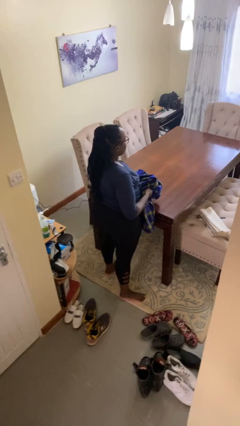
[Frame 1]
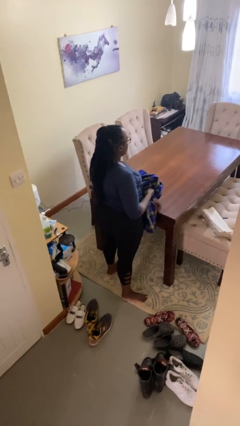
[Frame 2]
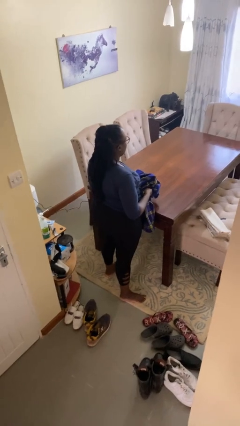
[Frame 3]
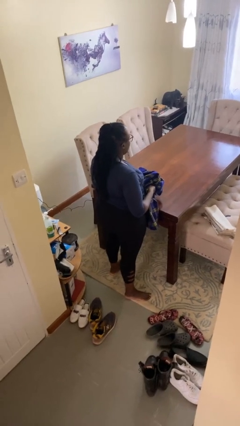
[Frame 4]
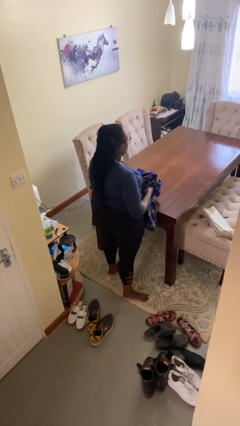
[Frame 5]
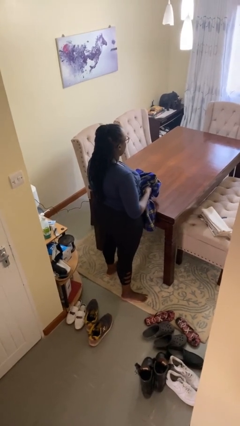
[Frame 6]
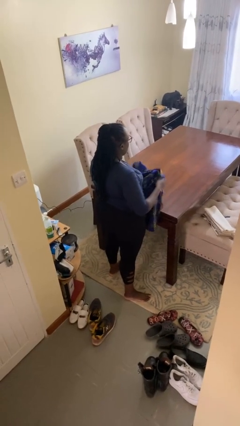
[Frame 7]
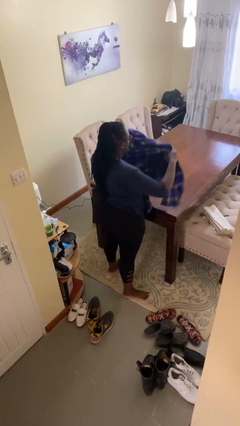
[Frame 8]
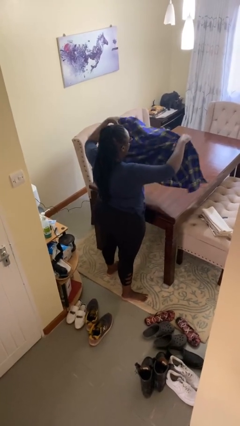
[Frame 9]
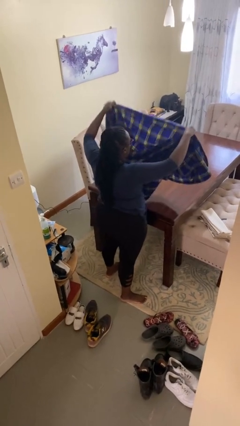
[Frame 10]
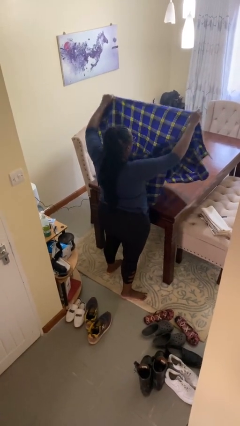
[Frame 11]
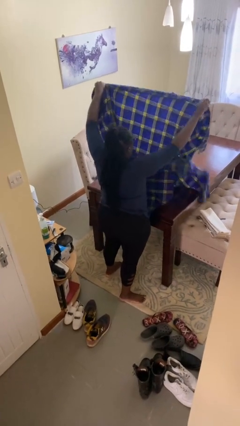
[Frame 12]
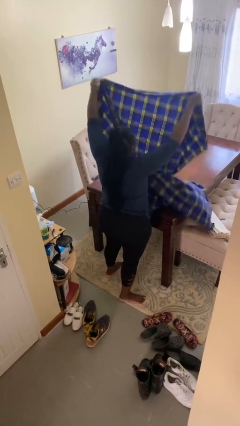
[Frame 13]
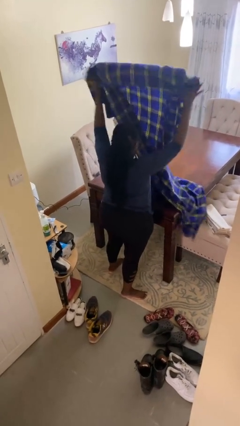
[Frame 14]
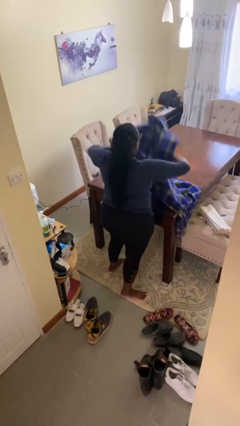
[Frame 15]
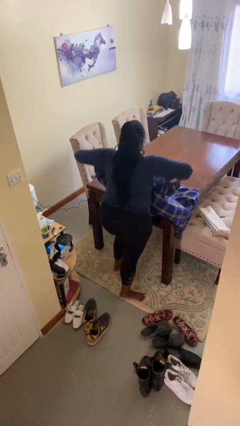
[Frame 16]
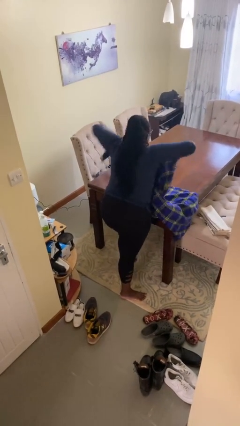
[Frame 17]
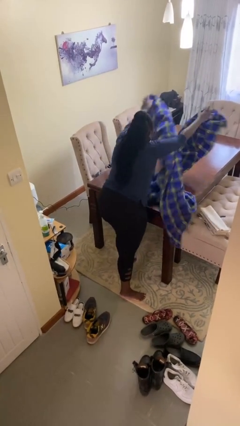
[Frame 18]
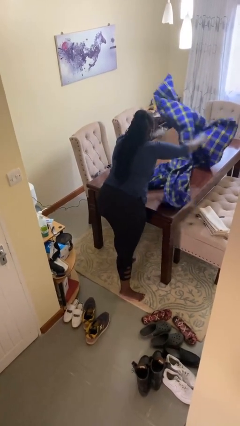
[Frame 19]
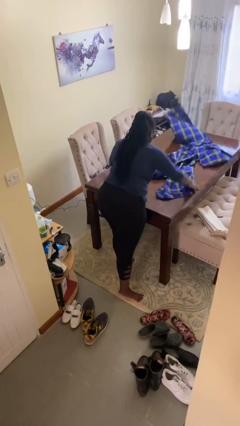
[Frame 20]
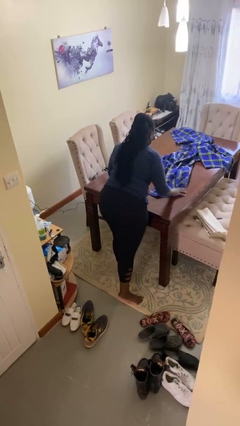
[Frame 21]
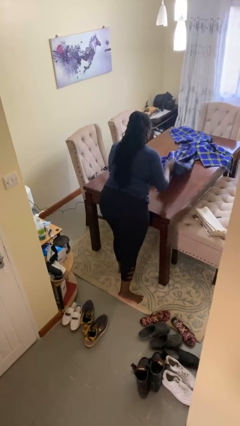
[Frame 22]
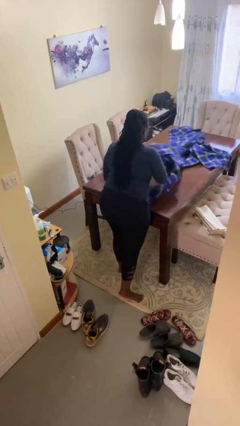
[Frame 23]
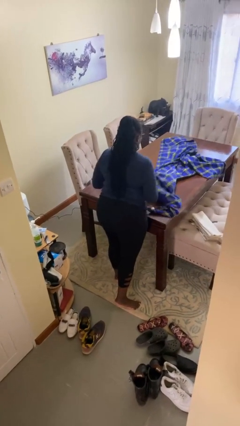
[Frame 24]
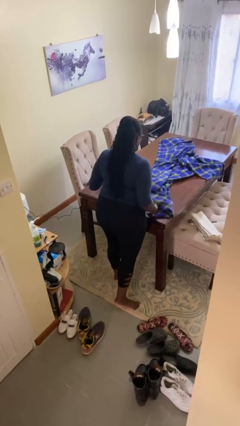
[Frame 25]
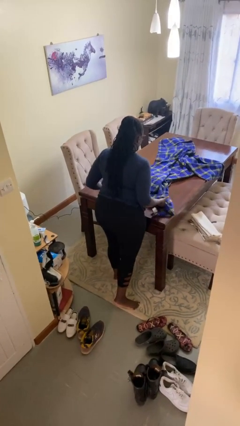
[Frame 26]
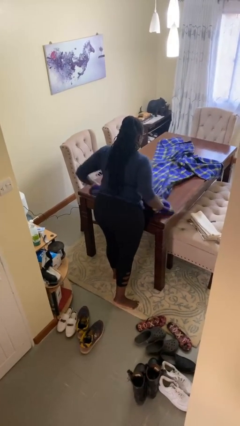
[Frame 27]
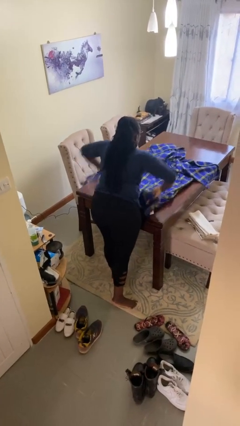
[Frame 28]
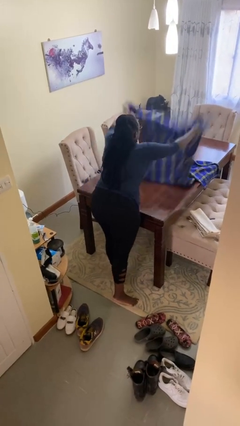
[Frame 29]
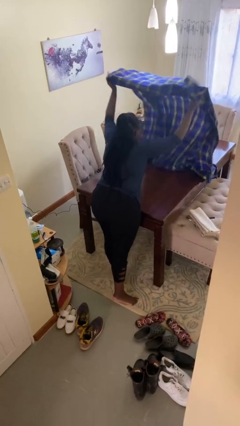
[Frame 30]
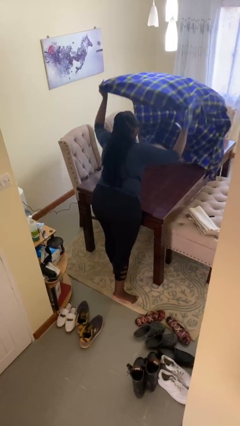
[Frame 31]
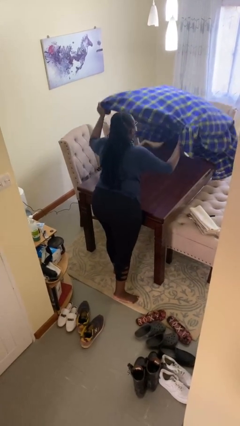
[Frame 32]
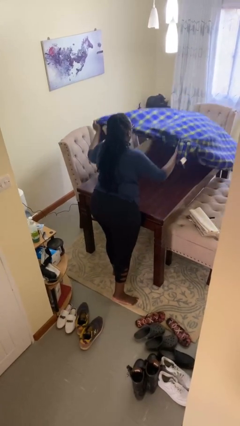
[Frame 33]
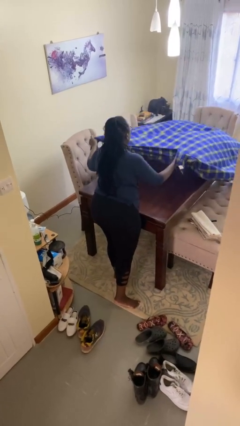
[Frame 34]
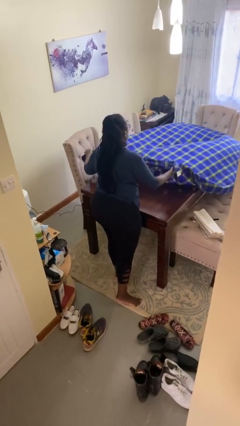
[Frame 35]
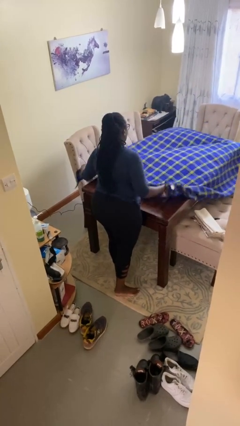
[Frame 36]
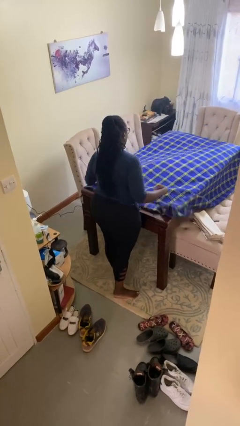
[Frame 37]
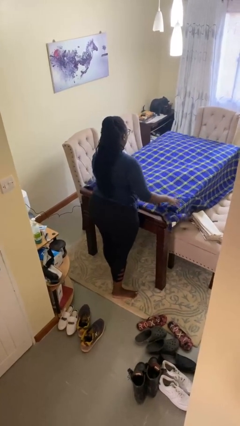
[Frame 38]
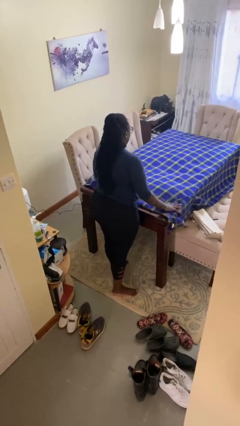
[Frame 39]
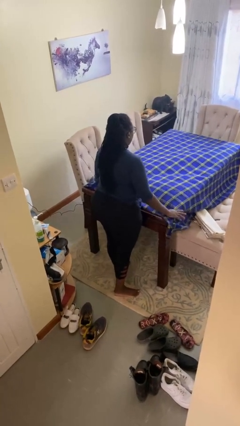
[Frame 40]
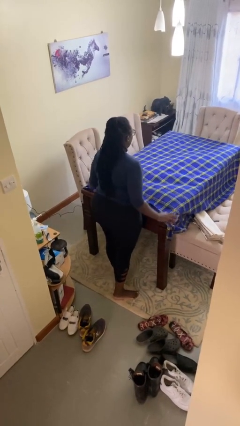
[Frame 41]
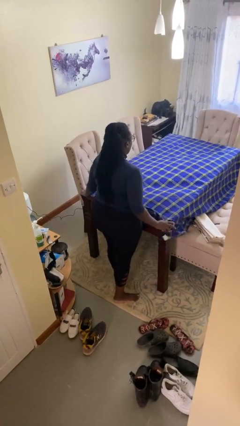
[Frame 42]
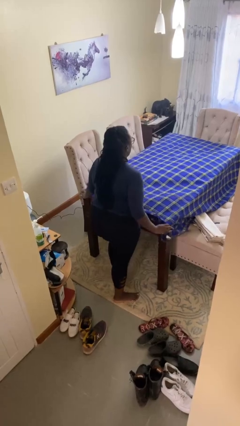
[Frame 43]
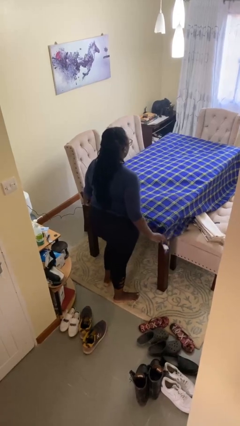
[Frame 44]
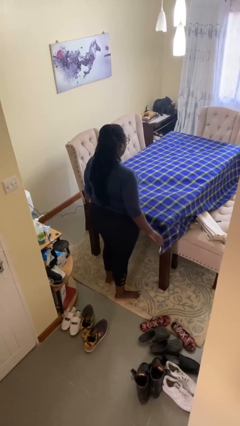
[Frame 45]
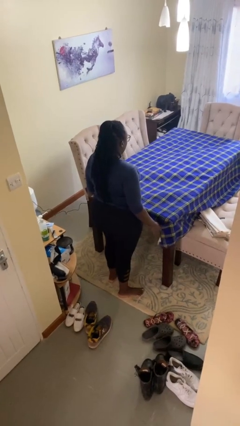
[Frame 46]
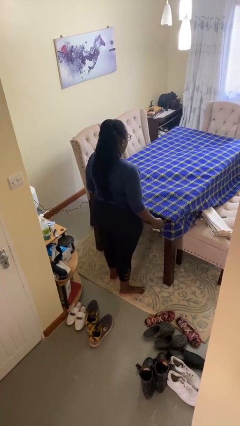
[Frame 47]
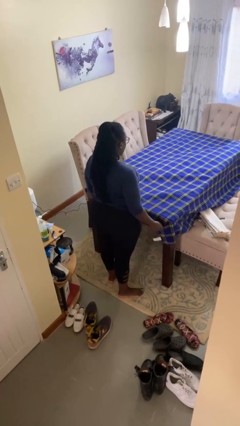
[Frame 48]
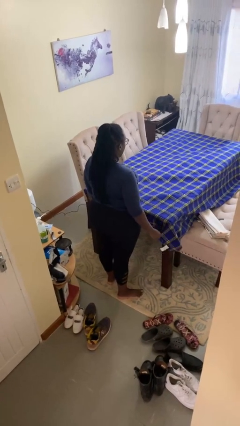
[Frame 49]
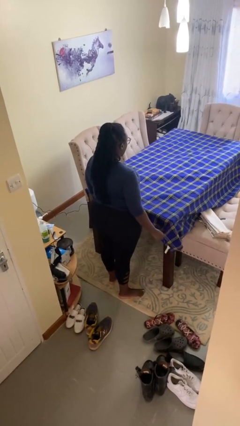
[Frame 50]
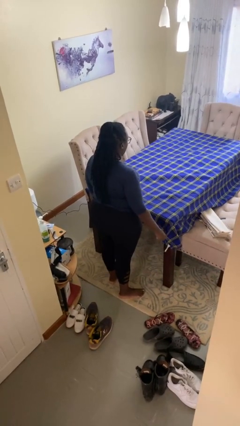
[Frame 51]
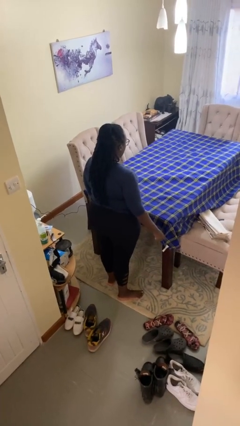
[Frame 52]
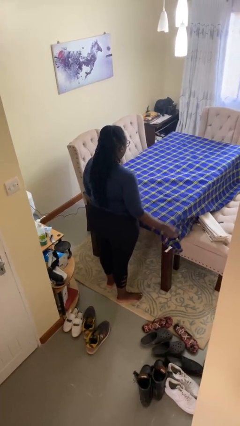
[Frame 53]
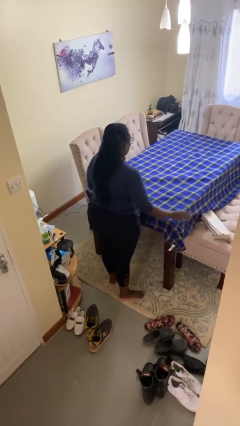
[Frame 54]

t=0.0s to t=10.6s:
person spreads tablecloth

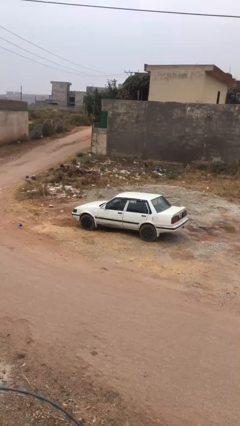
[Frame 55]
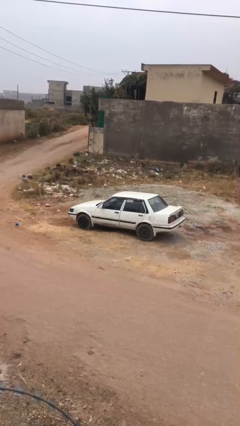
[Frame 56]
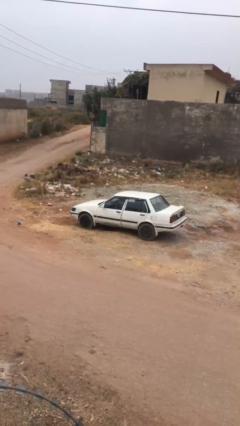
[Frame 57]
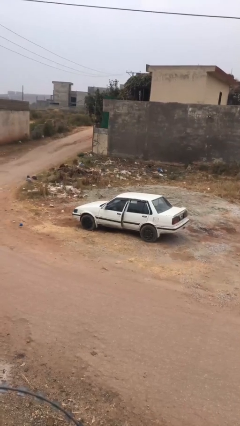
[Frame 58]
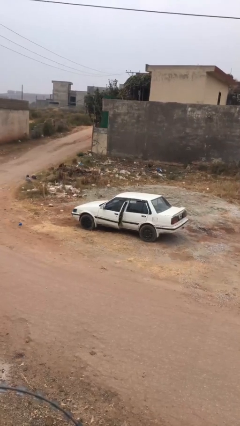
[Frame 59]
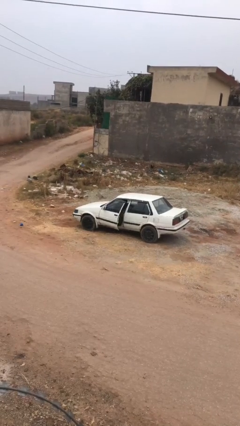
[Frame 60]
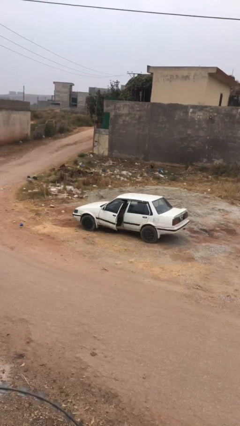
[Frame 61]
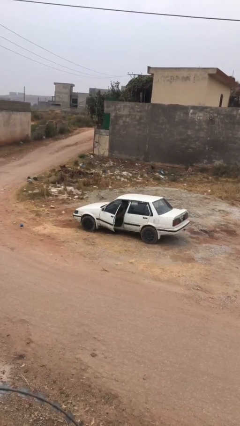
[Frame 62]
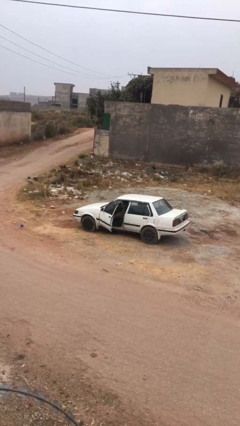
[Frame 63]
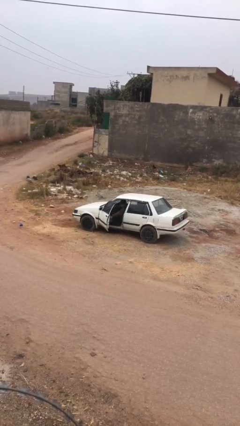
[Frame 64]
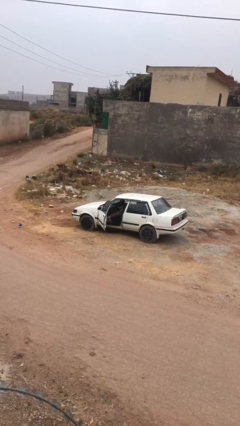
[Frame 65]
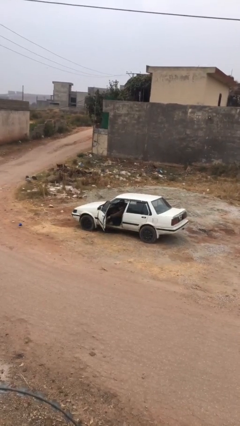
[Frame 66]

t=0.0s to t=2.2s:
person opens car door

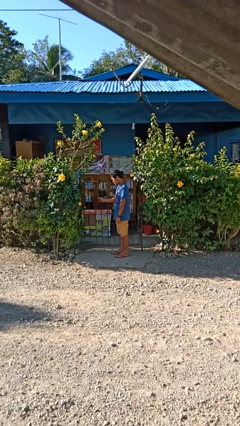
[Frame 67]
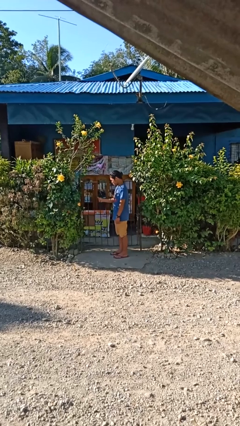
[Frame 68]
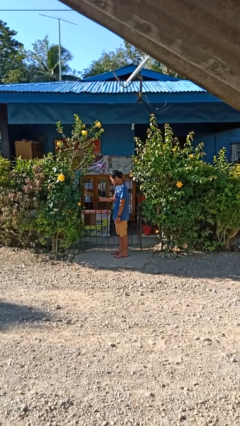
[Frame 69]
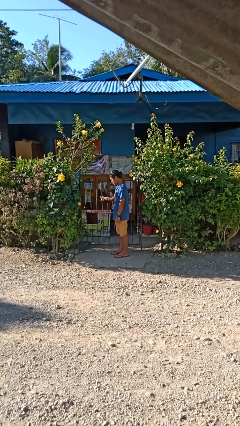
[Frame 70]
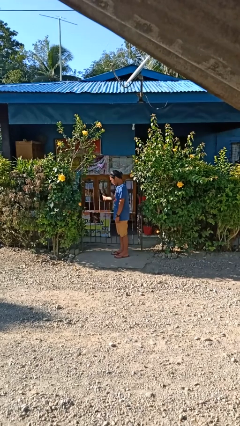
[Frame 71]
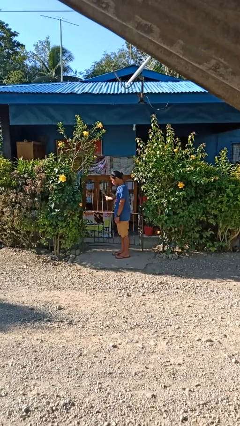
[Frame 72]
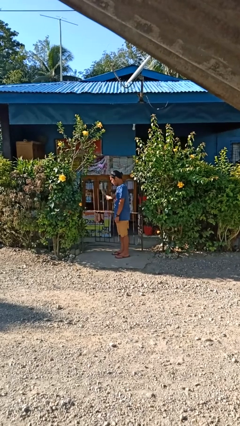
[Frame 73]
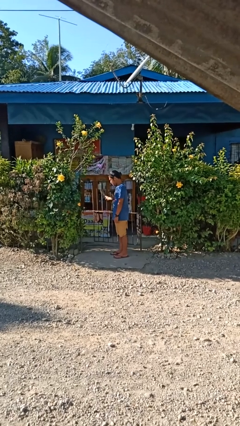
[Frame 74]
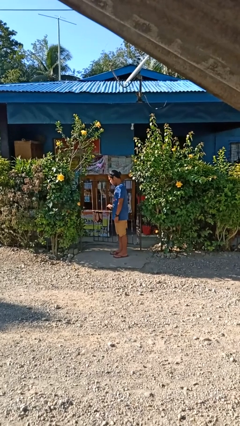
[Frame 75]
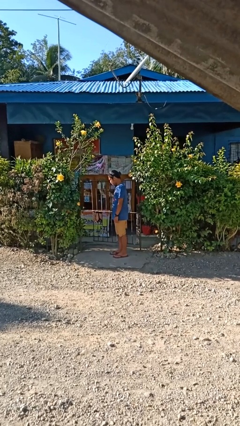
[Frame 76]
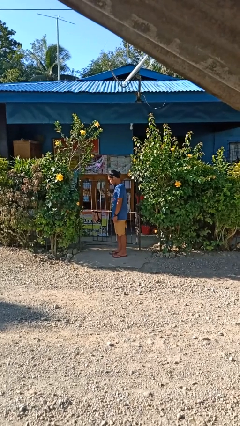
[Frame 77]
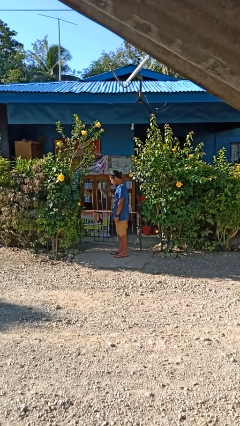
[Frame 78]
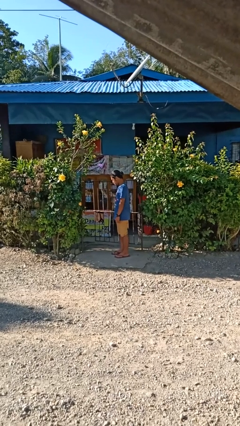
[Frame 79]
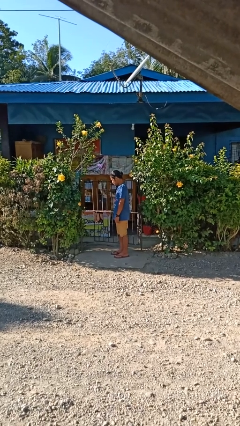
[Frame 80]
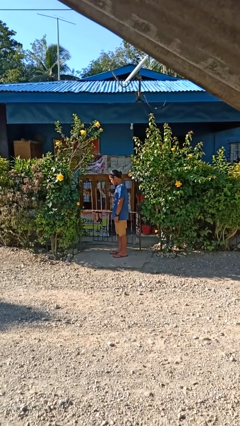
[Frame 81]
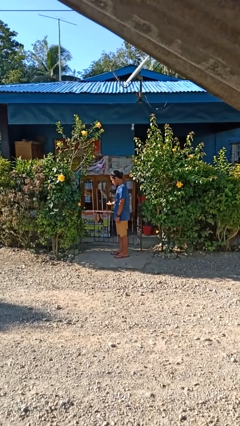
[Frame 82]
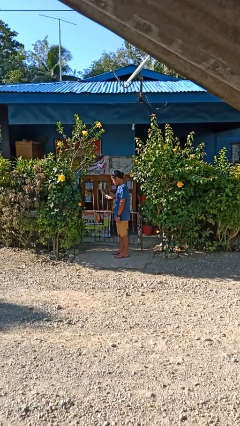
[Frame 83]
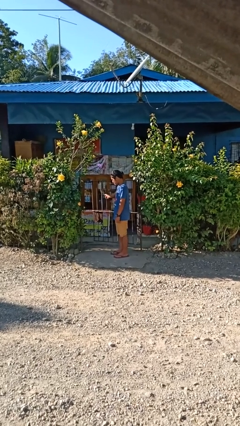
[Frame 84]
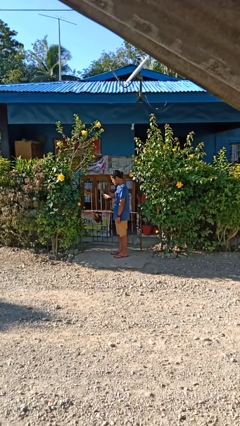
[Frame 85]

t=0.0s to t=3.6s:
person opens gate

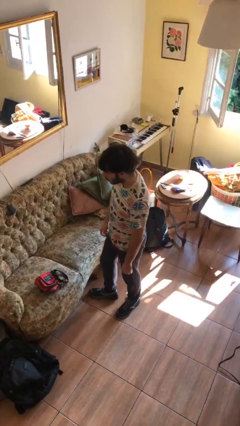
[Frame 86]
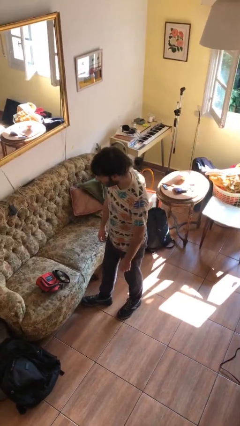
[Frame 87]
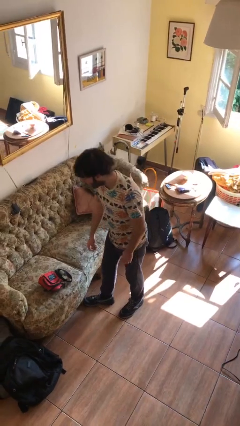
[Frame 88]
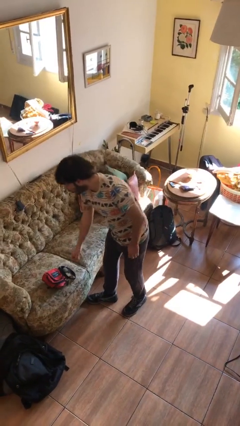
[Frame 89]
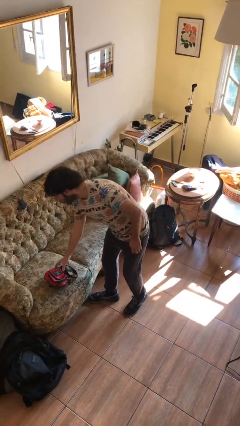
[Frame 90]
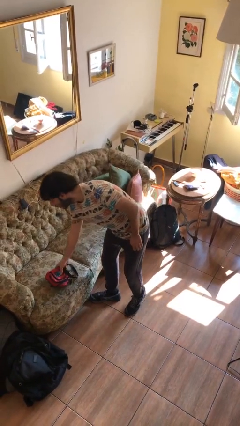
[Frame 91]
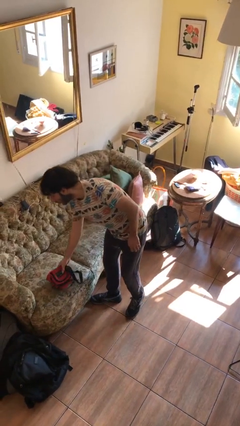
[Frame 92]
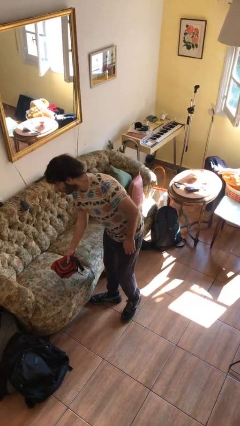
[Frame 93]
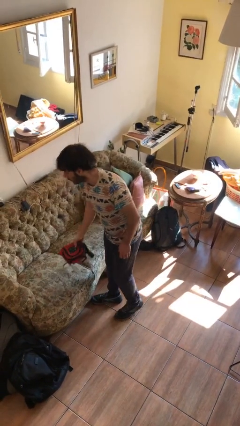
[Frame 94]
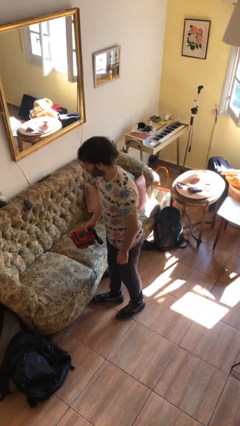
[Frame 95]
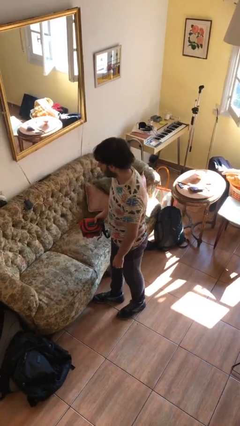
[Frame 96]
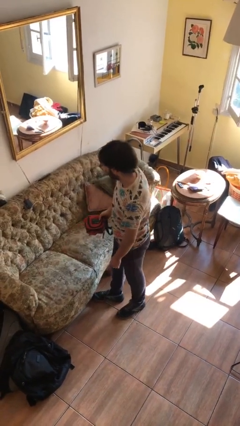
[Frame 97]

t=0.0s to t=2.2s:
person picks up object from couch
